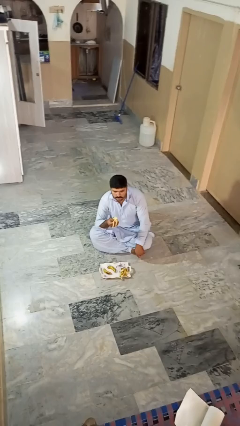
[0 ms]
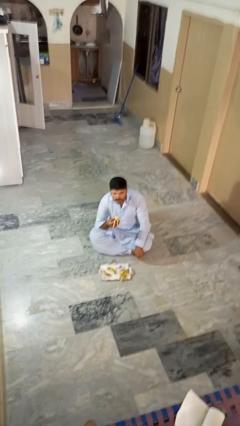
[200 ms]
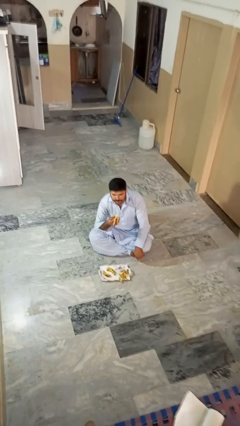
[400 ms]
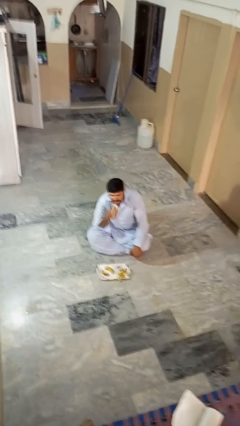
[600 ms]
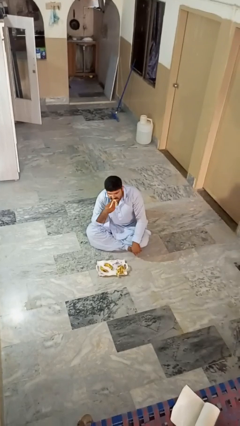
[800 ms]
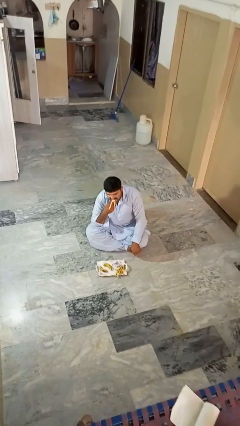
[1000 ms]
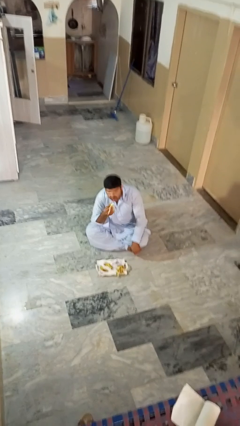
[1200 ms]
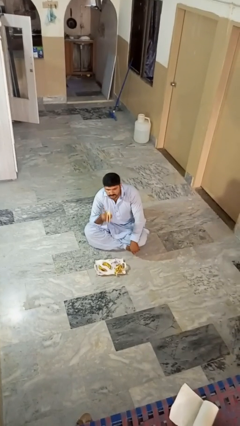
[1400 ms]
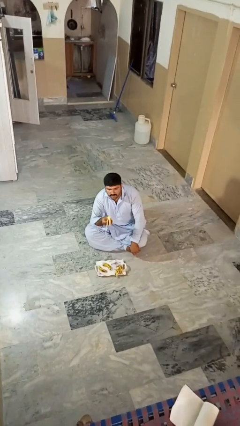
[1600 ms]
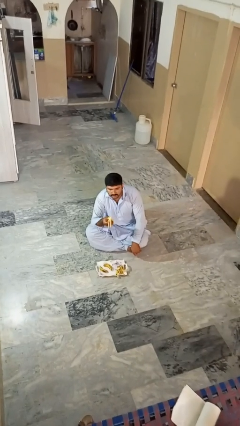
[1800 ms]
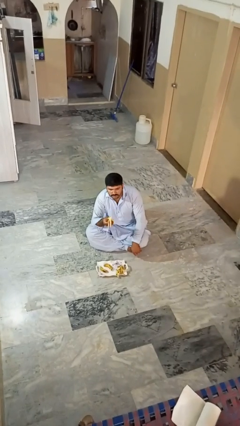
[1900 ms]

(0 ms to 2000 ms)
person eats banana

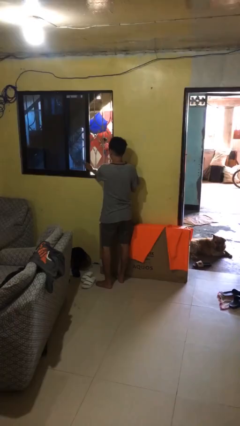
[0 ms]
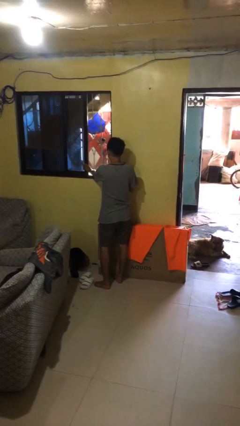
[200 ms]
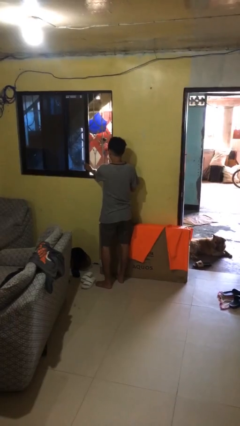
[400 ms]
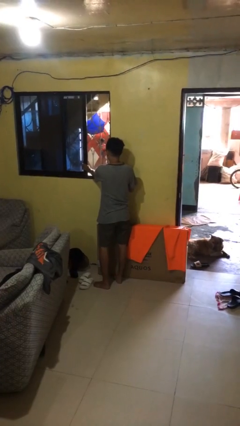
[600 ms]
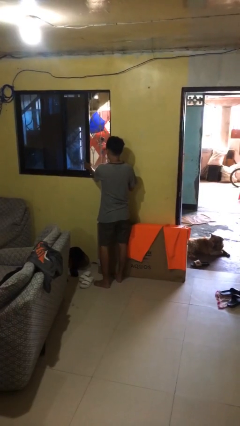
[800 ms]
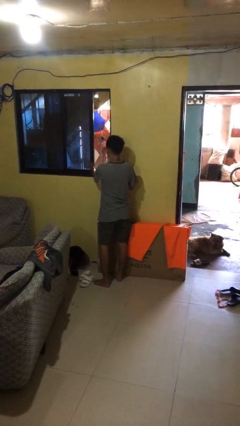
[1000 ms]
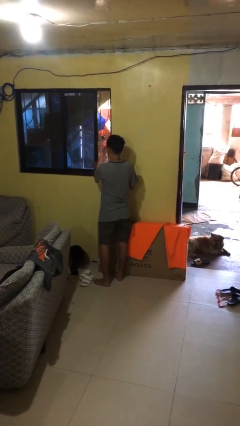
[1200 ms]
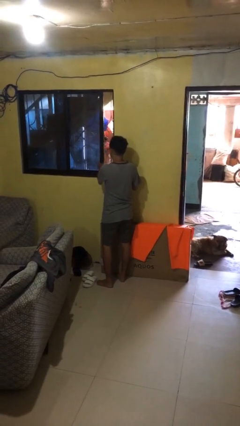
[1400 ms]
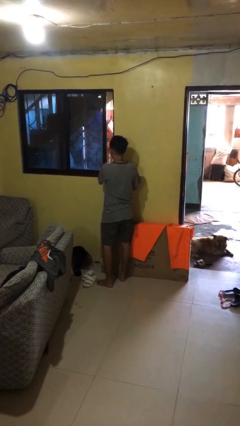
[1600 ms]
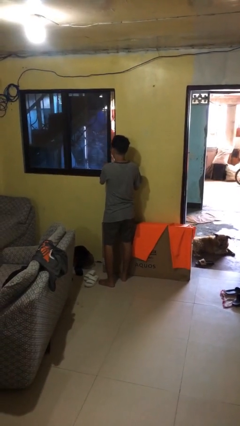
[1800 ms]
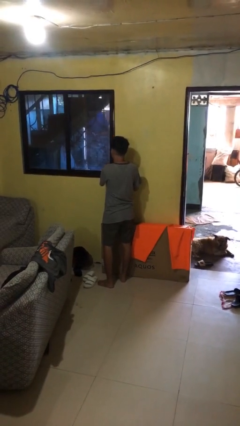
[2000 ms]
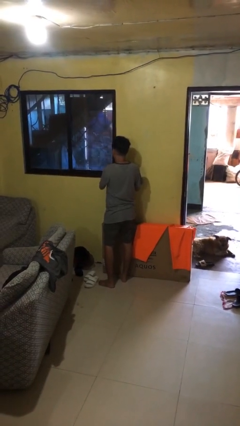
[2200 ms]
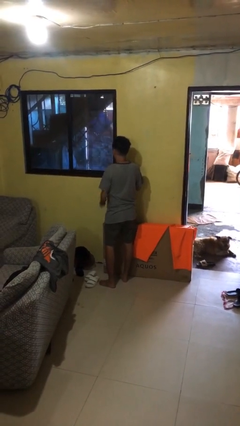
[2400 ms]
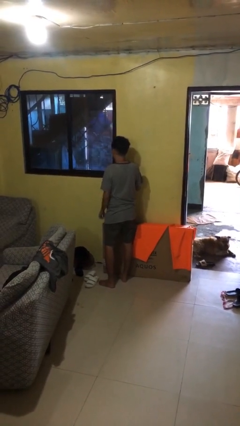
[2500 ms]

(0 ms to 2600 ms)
person closes home window

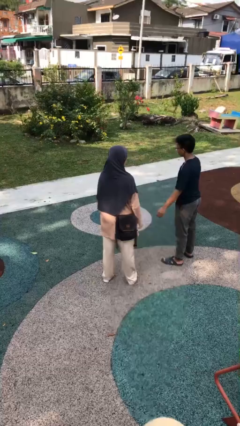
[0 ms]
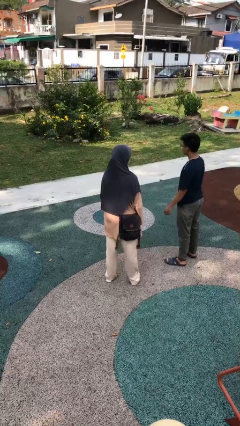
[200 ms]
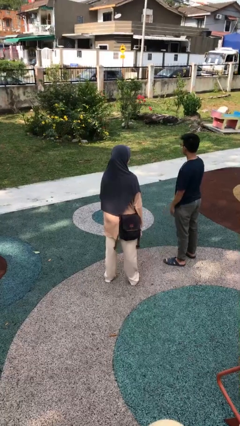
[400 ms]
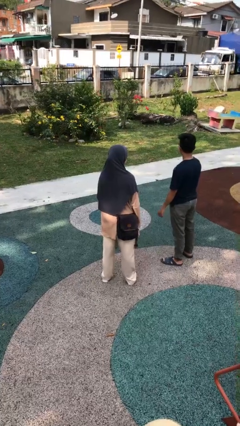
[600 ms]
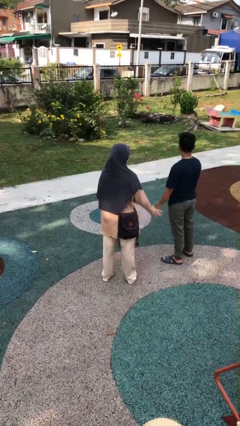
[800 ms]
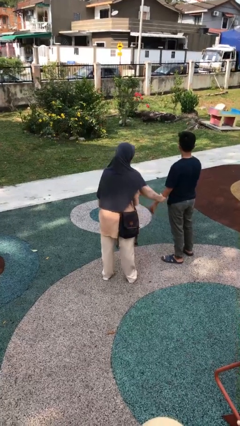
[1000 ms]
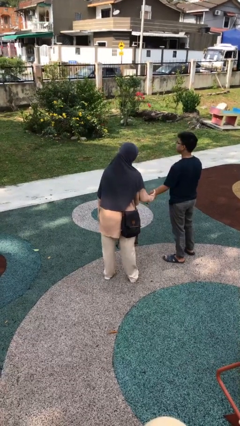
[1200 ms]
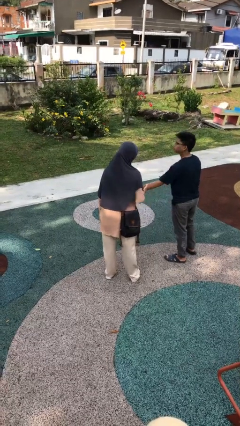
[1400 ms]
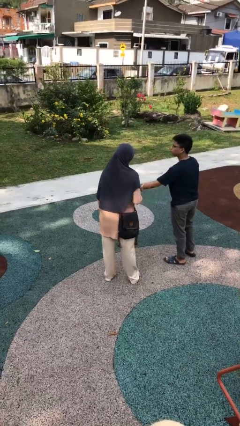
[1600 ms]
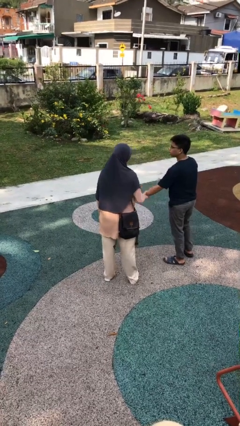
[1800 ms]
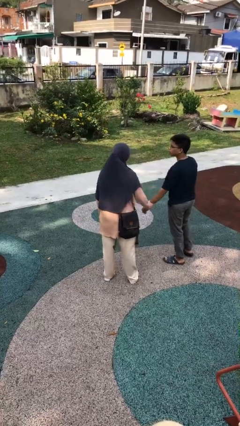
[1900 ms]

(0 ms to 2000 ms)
person grabs person by forearm

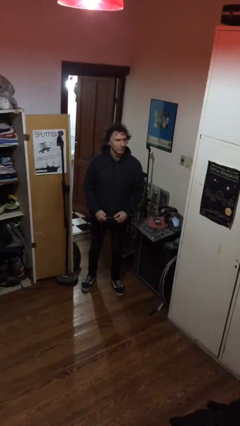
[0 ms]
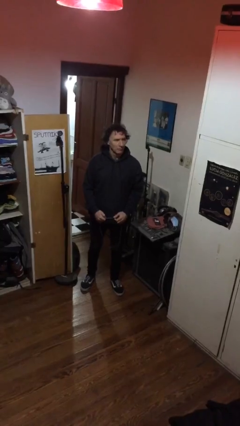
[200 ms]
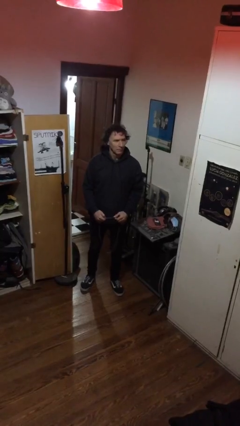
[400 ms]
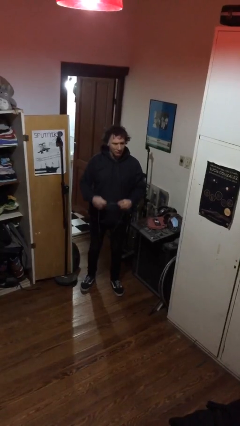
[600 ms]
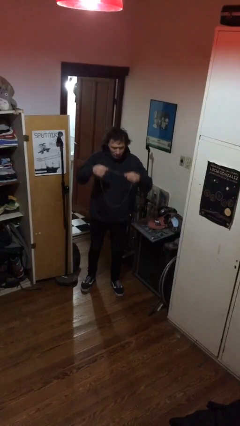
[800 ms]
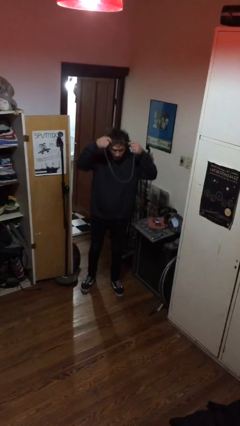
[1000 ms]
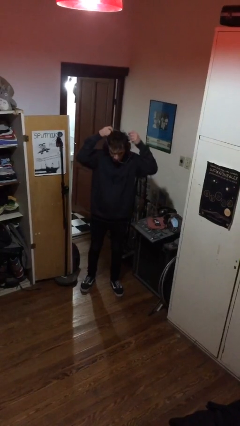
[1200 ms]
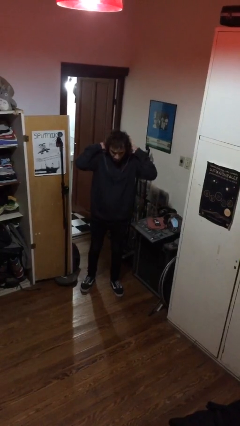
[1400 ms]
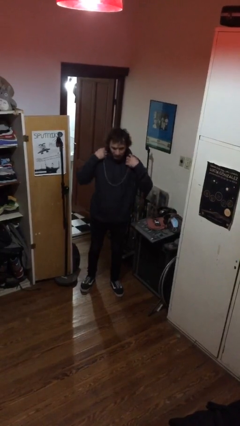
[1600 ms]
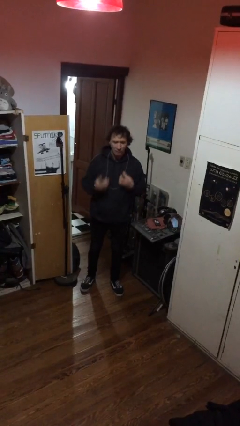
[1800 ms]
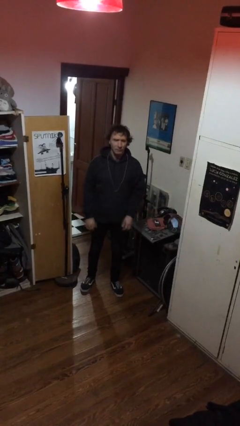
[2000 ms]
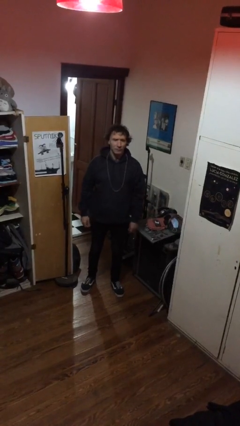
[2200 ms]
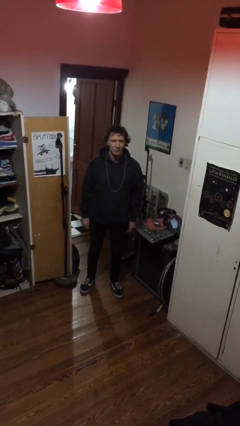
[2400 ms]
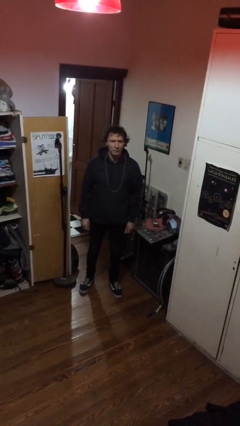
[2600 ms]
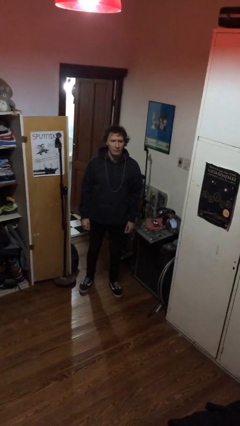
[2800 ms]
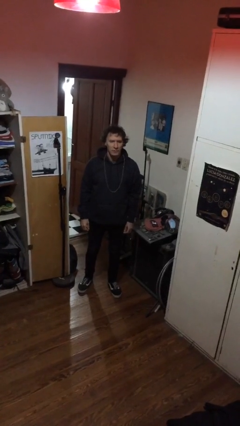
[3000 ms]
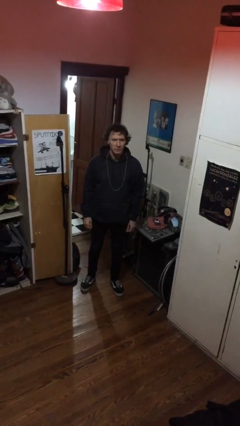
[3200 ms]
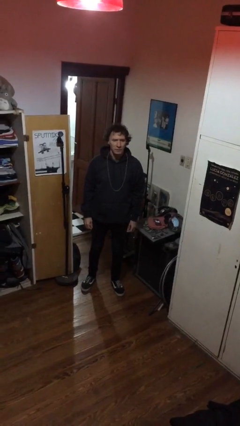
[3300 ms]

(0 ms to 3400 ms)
person puts on necklace

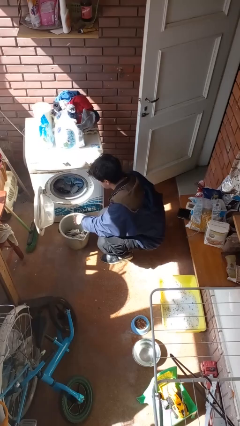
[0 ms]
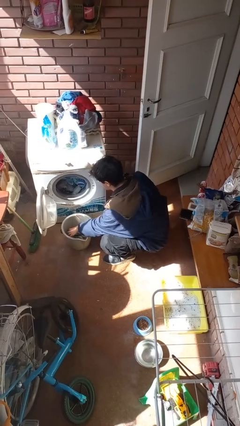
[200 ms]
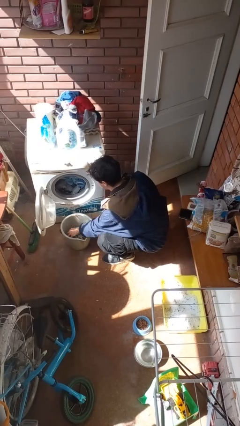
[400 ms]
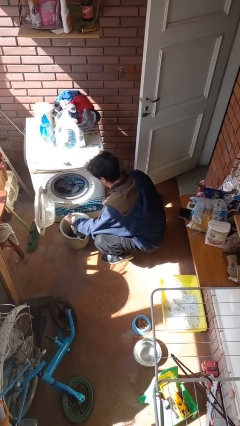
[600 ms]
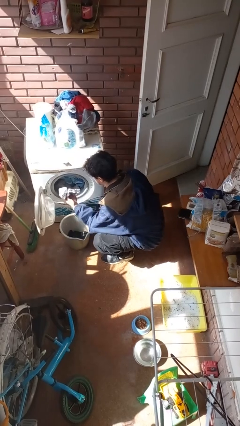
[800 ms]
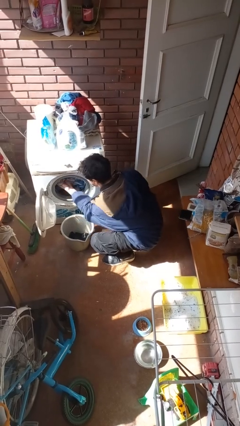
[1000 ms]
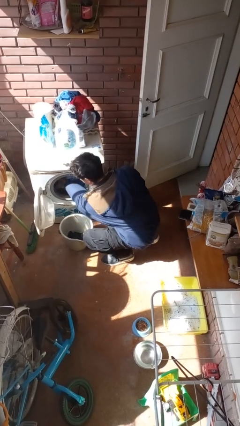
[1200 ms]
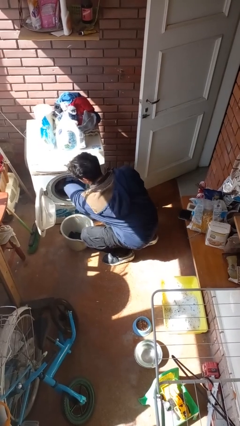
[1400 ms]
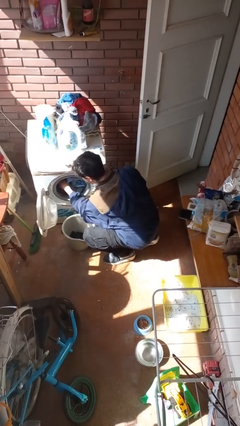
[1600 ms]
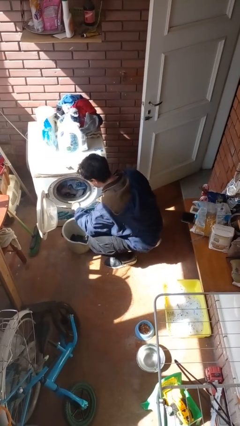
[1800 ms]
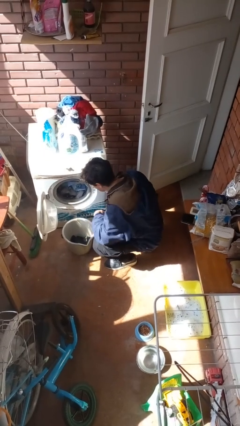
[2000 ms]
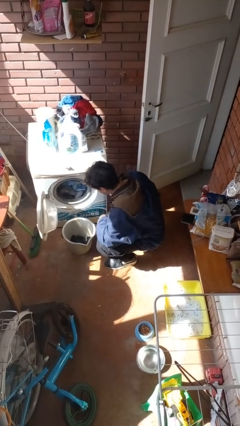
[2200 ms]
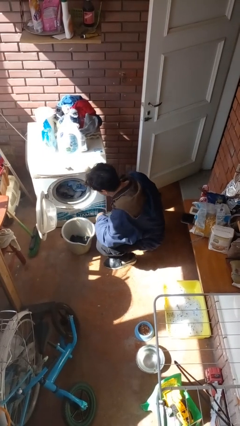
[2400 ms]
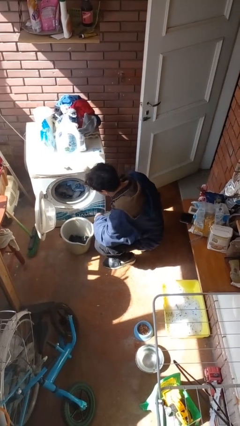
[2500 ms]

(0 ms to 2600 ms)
person loads clotheswasher

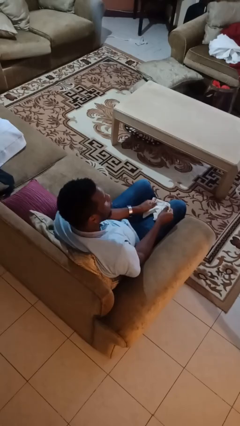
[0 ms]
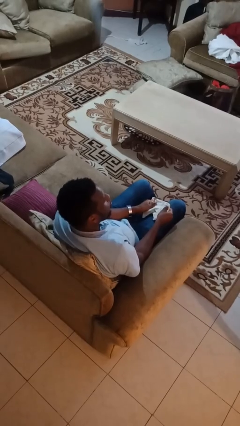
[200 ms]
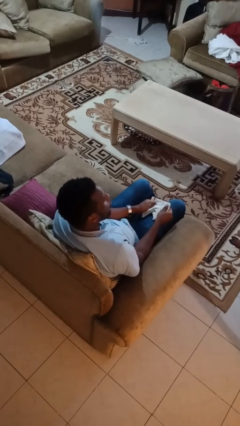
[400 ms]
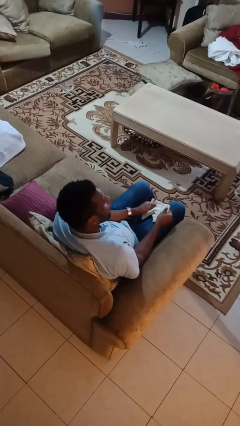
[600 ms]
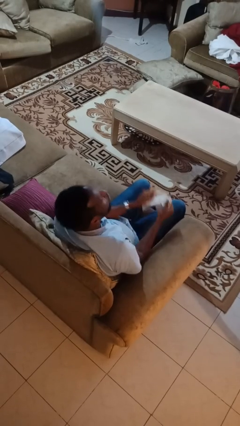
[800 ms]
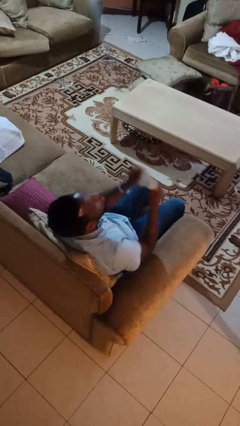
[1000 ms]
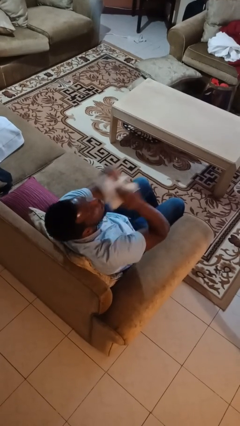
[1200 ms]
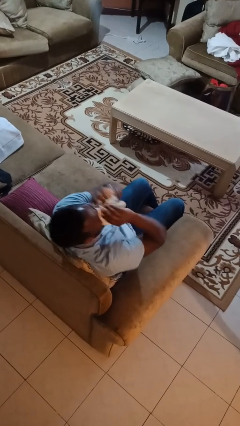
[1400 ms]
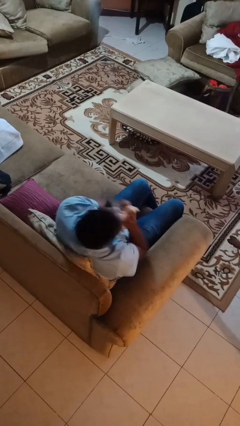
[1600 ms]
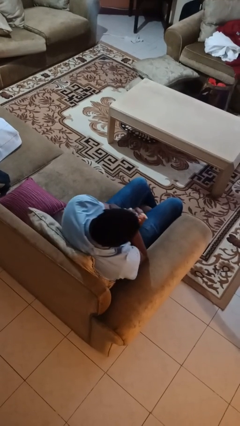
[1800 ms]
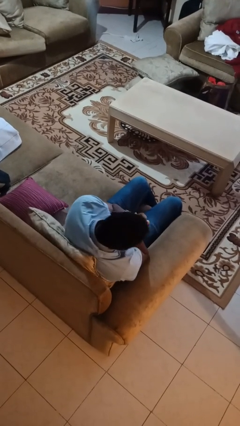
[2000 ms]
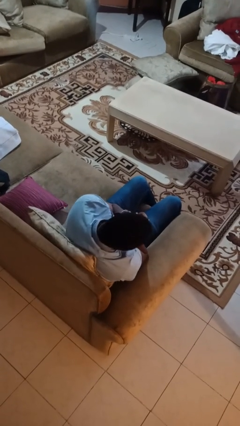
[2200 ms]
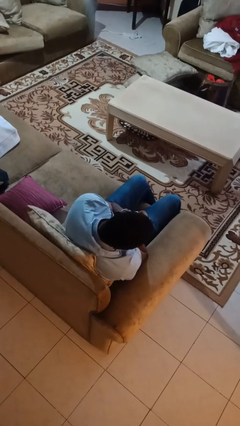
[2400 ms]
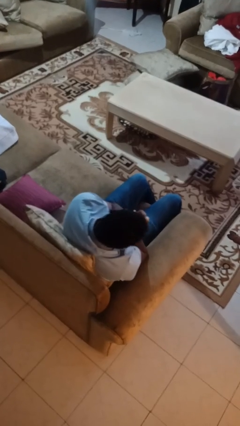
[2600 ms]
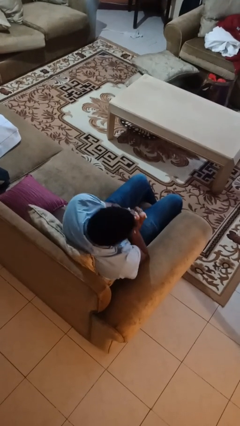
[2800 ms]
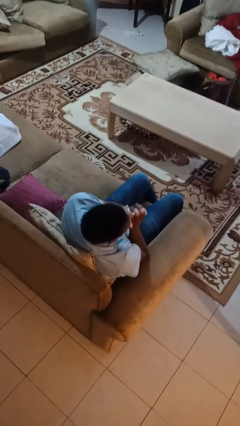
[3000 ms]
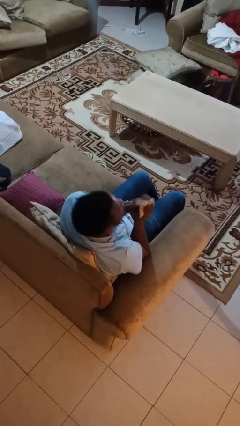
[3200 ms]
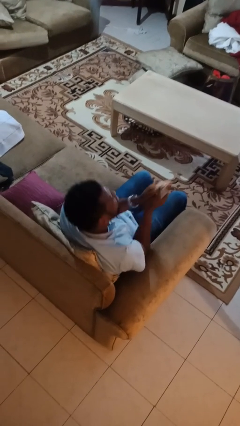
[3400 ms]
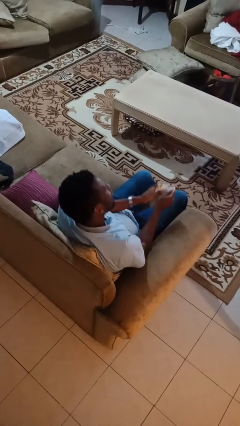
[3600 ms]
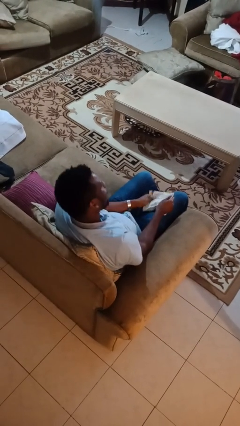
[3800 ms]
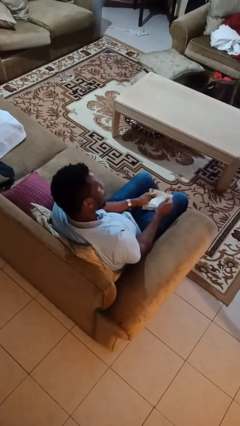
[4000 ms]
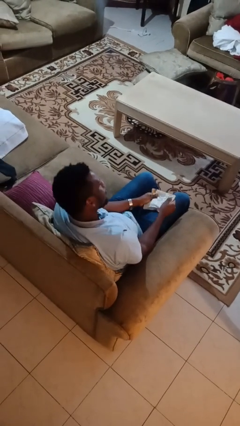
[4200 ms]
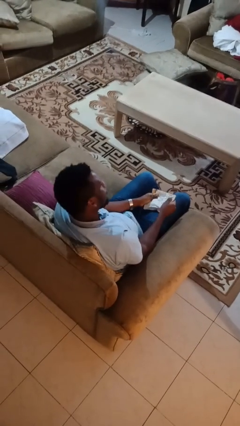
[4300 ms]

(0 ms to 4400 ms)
person blows nose

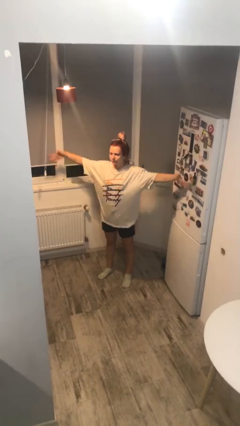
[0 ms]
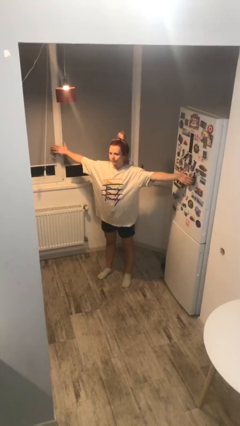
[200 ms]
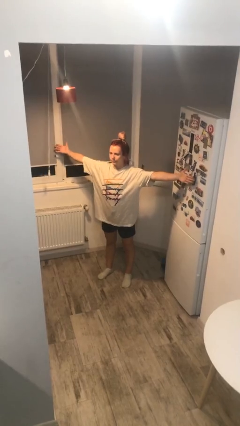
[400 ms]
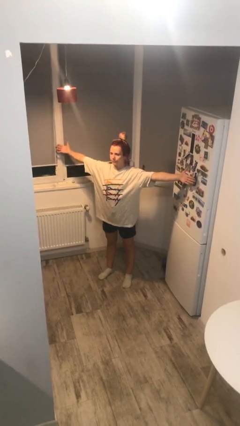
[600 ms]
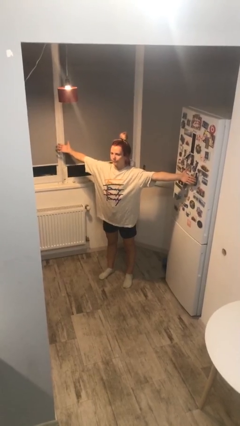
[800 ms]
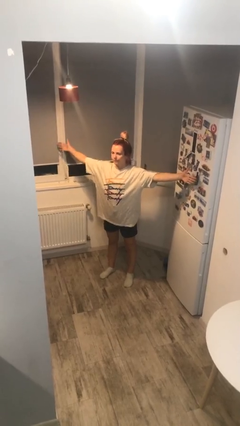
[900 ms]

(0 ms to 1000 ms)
person stretches arms to side
